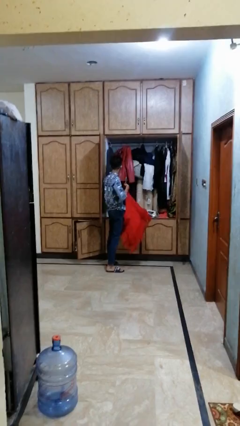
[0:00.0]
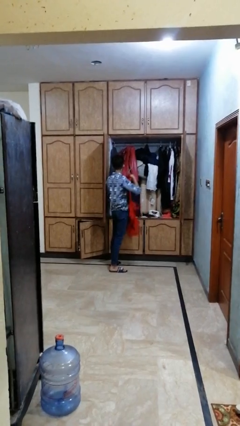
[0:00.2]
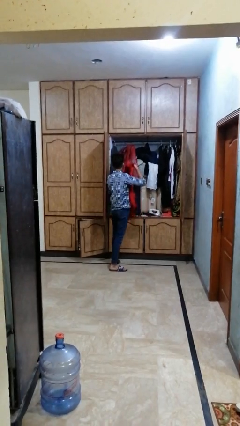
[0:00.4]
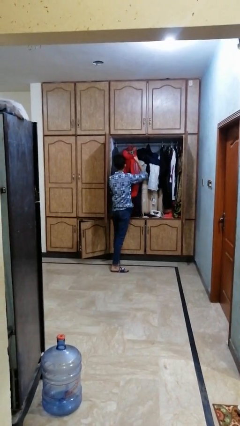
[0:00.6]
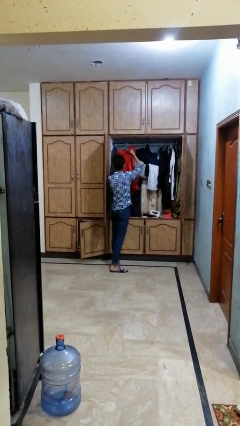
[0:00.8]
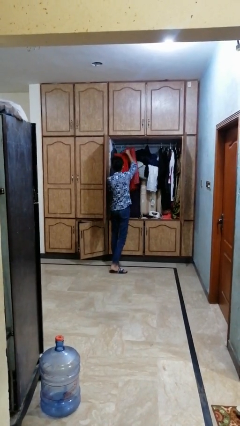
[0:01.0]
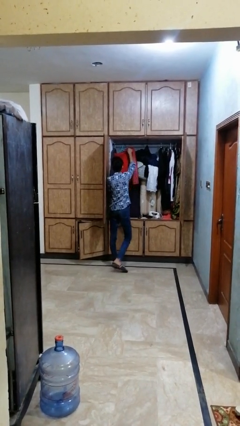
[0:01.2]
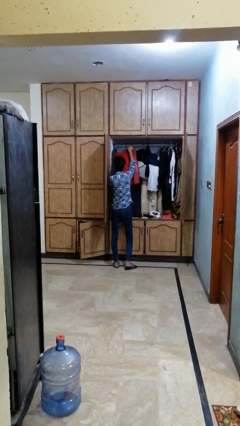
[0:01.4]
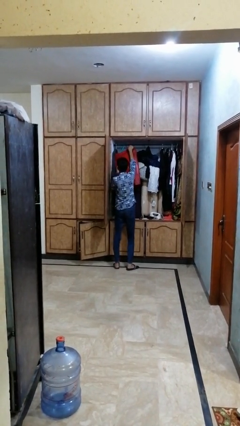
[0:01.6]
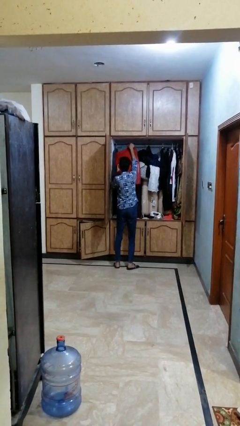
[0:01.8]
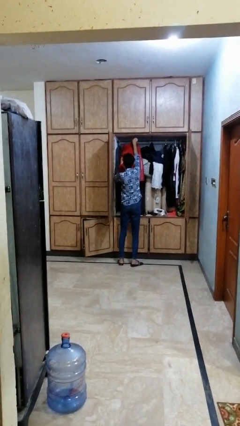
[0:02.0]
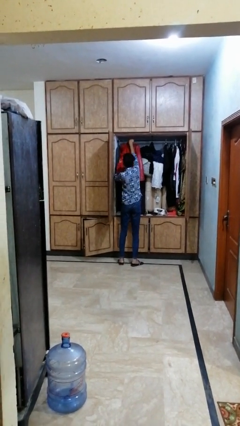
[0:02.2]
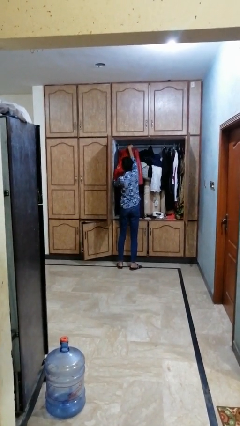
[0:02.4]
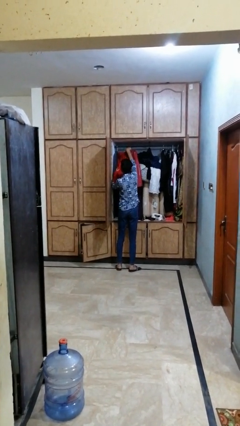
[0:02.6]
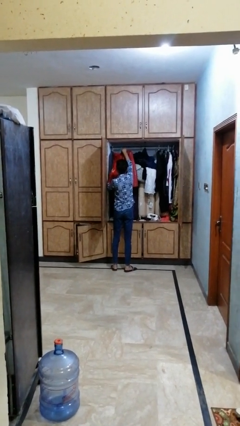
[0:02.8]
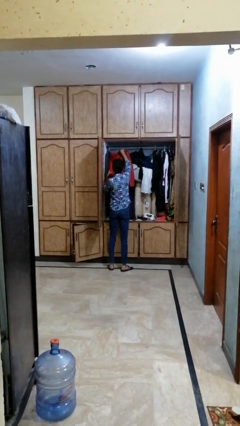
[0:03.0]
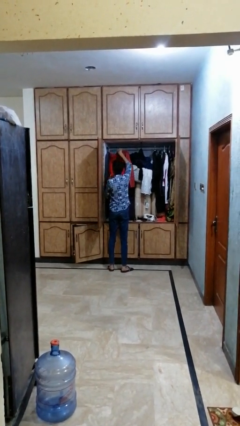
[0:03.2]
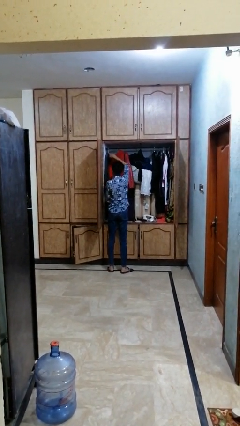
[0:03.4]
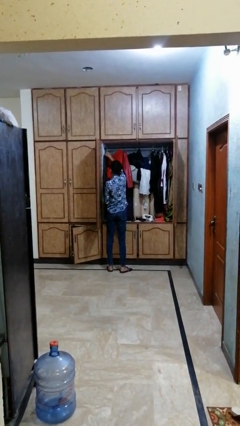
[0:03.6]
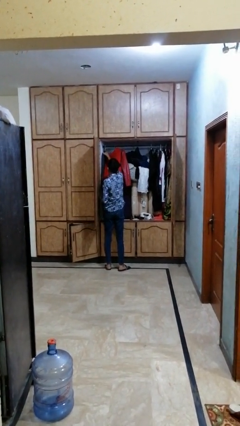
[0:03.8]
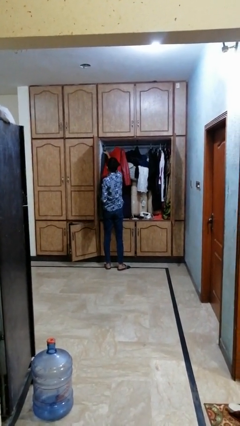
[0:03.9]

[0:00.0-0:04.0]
person puts clothes into dresser

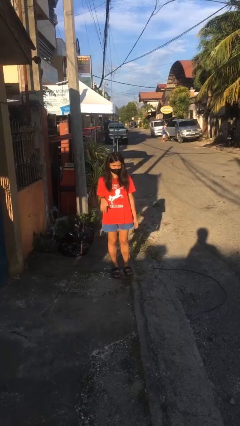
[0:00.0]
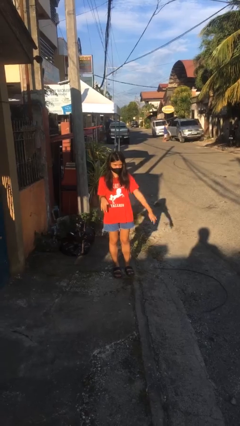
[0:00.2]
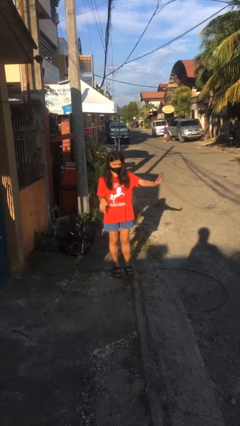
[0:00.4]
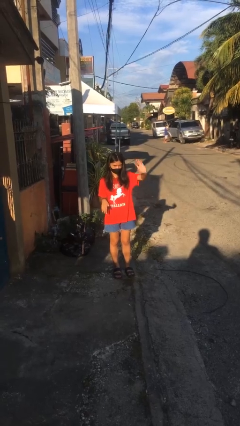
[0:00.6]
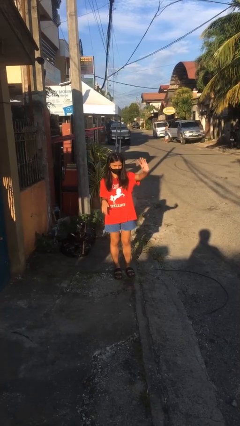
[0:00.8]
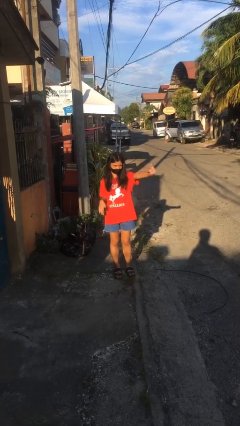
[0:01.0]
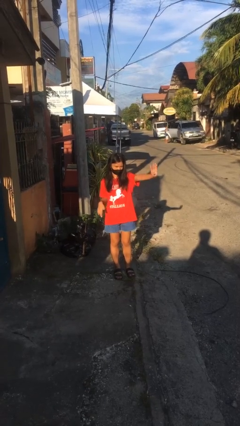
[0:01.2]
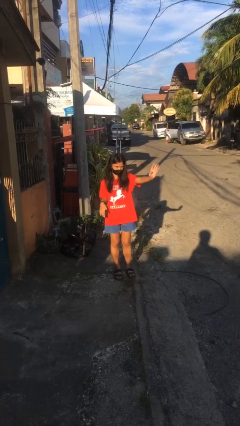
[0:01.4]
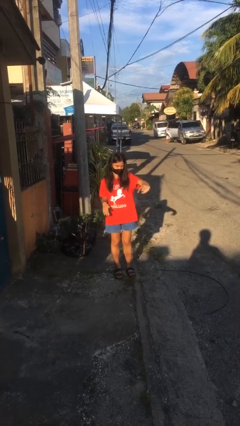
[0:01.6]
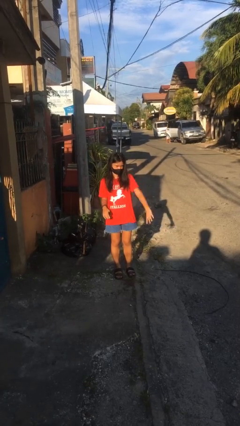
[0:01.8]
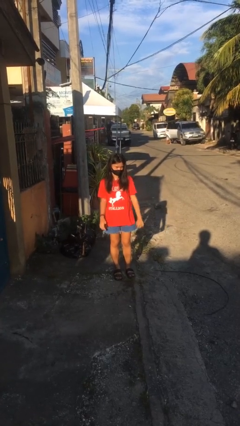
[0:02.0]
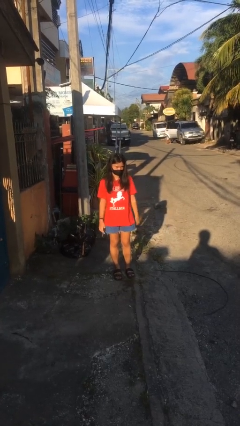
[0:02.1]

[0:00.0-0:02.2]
person waves at person

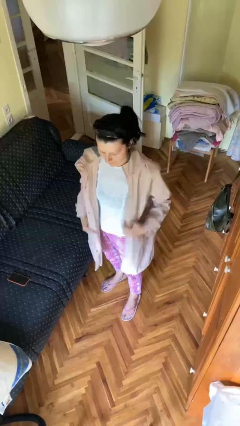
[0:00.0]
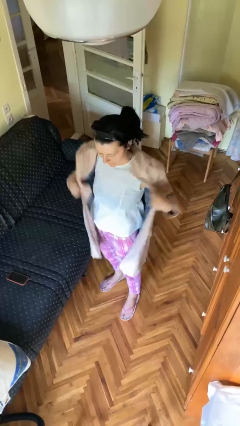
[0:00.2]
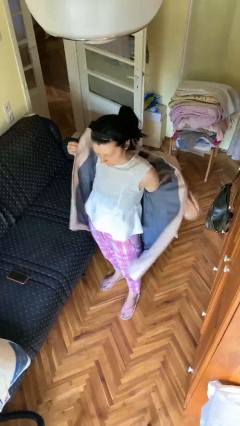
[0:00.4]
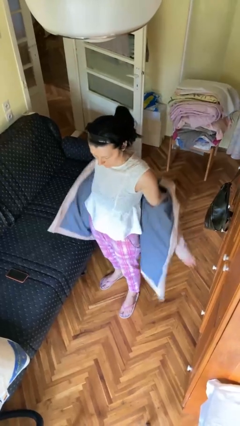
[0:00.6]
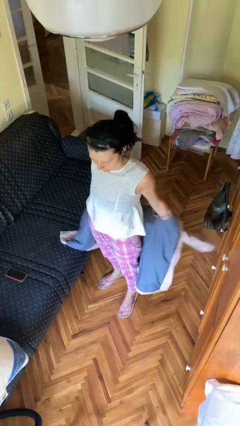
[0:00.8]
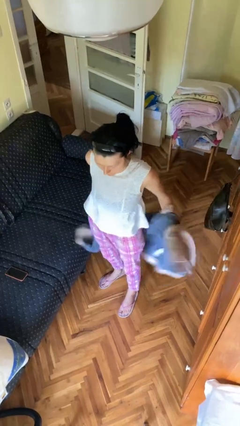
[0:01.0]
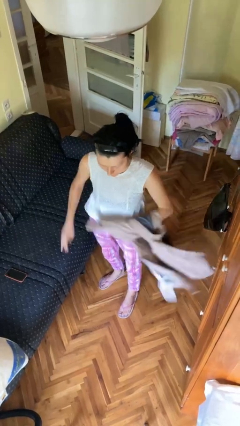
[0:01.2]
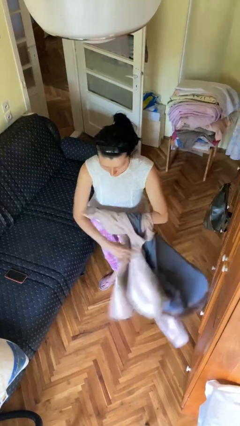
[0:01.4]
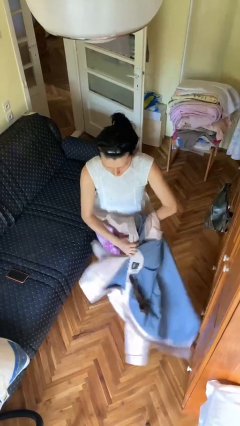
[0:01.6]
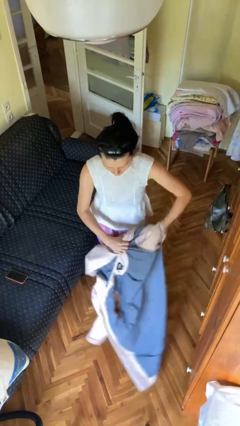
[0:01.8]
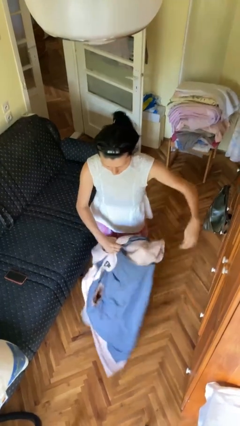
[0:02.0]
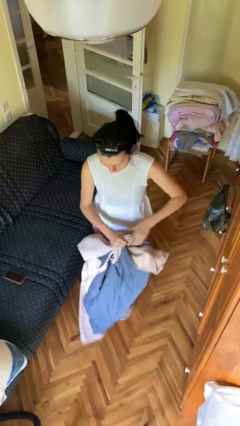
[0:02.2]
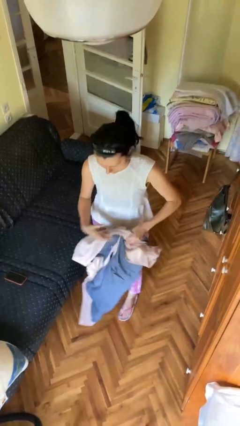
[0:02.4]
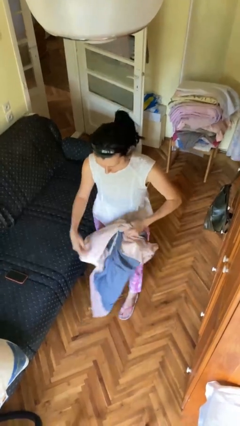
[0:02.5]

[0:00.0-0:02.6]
person takes off jacket

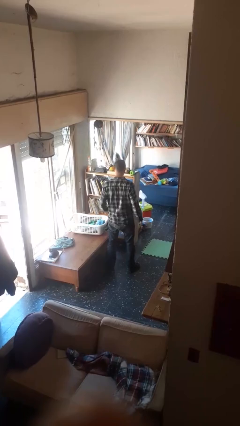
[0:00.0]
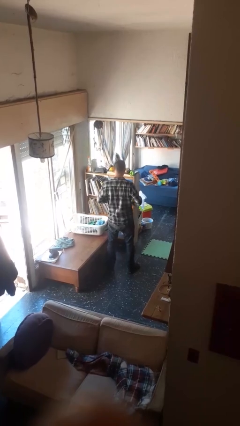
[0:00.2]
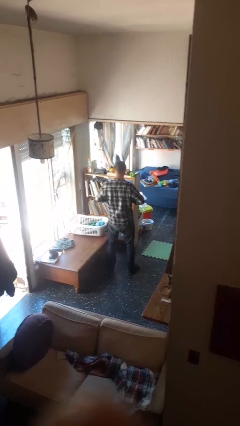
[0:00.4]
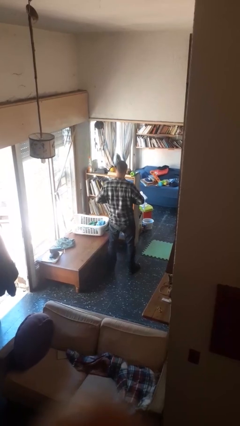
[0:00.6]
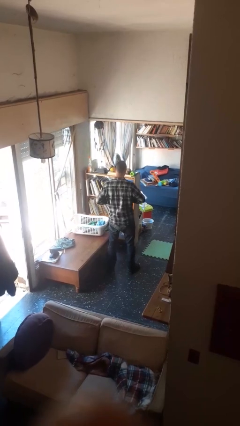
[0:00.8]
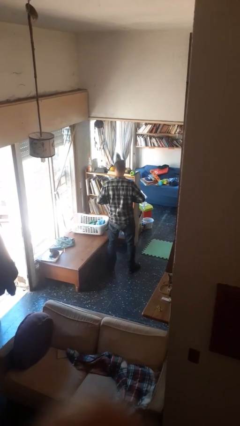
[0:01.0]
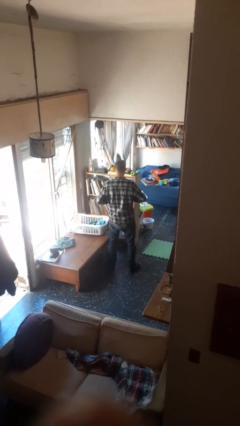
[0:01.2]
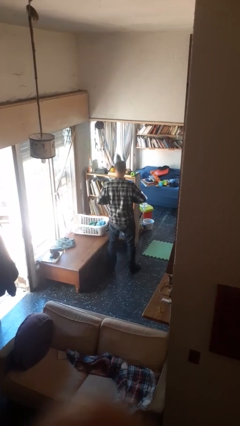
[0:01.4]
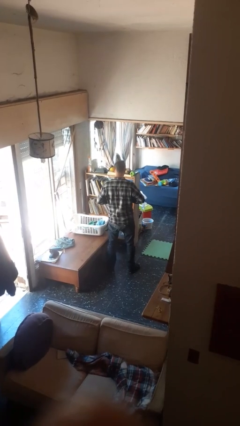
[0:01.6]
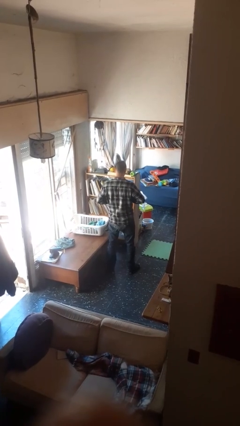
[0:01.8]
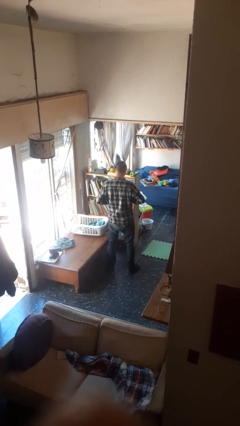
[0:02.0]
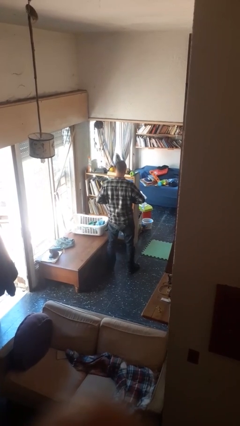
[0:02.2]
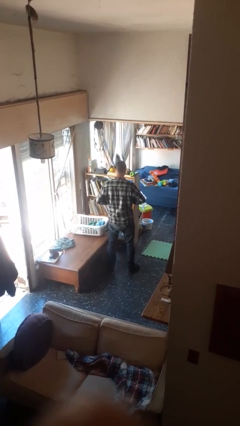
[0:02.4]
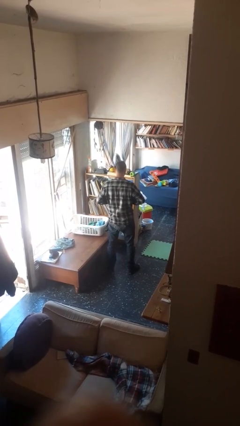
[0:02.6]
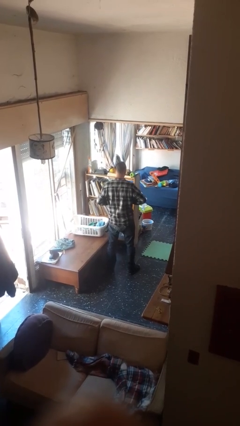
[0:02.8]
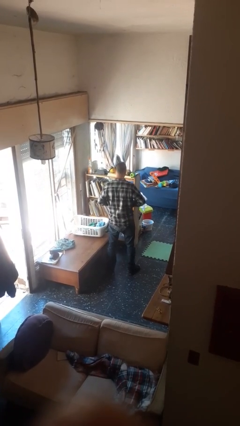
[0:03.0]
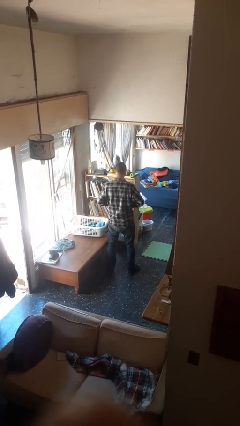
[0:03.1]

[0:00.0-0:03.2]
person buttons shirt

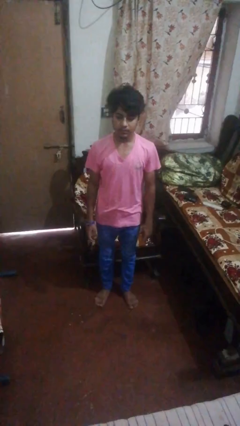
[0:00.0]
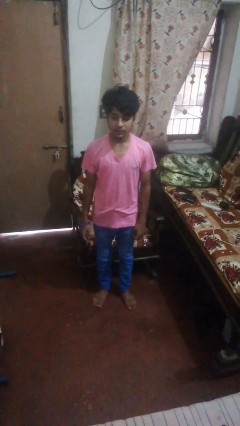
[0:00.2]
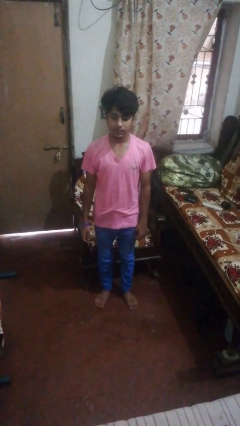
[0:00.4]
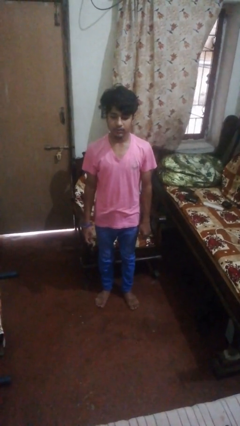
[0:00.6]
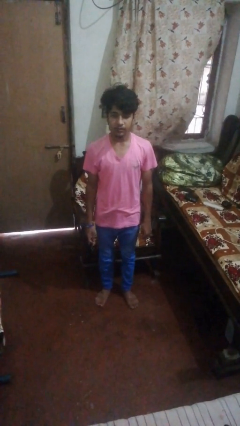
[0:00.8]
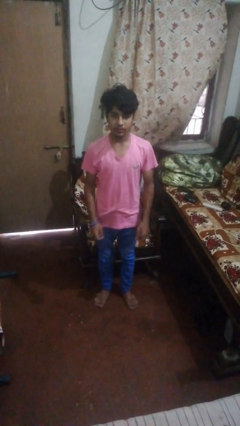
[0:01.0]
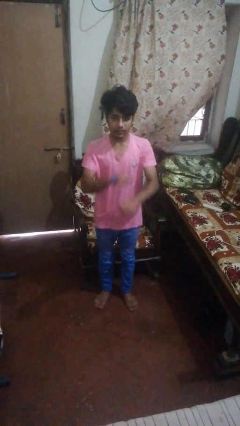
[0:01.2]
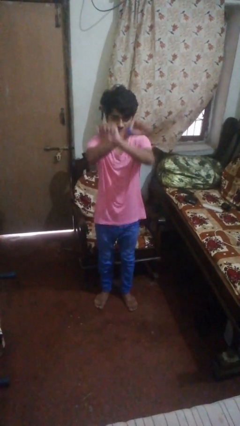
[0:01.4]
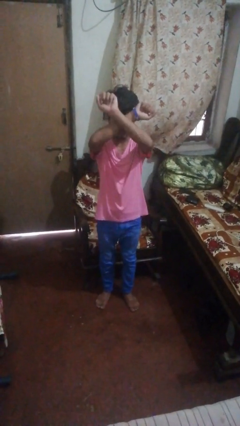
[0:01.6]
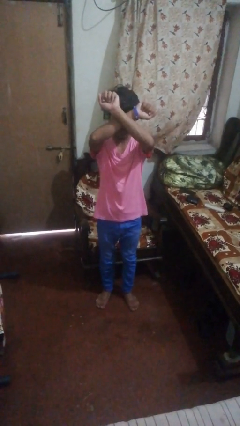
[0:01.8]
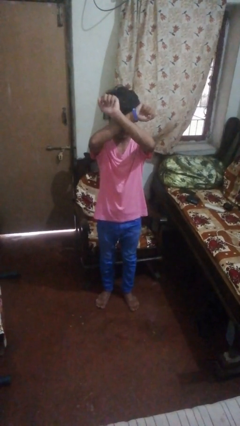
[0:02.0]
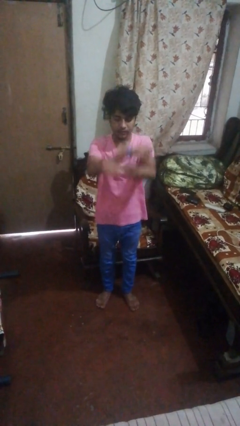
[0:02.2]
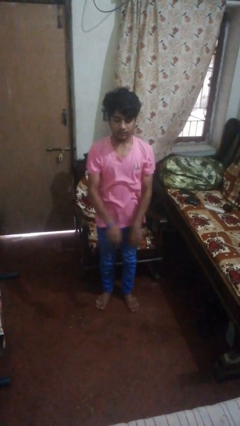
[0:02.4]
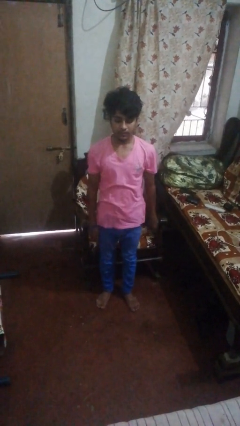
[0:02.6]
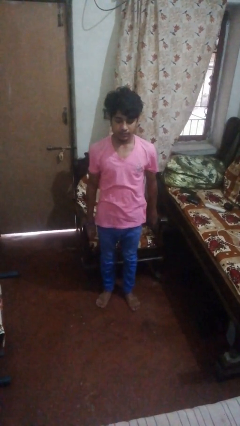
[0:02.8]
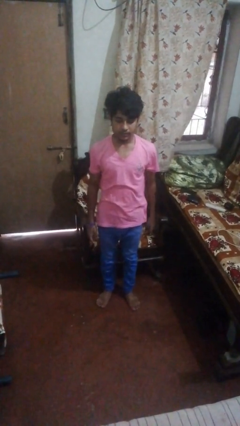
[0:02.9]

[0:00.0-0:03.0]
person karate chop

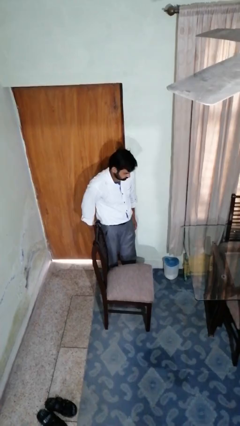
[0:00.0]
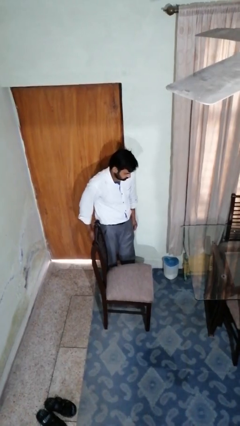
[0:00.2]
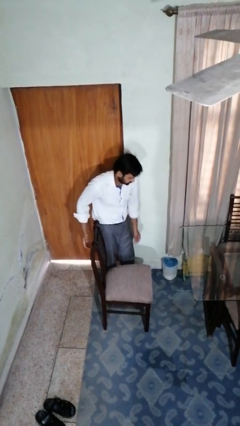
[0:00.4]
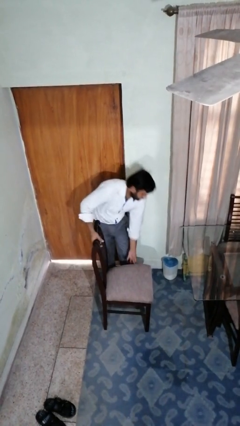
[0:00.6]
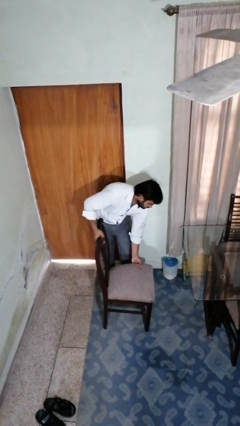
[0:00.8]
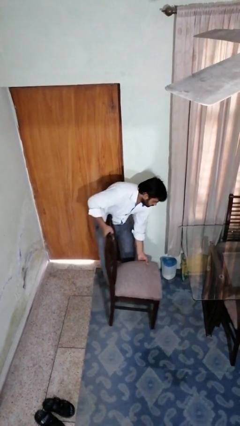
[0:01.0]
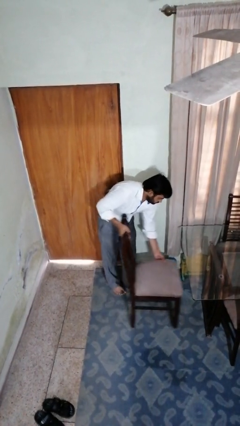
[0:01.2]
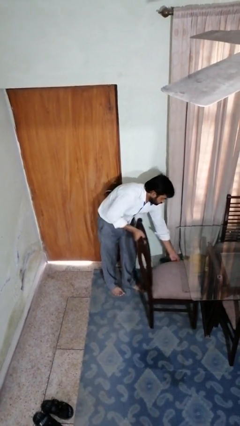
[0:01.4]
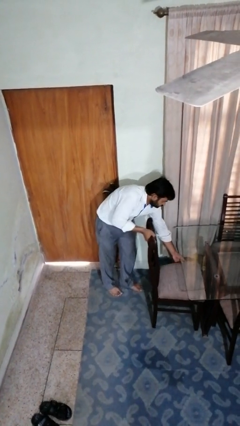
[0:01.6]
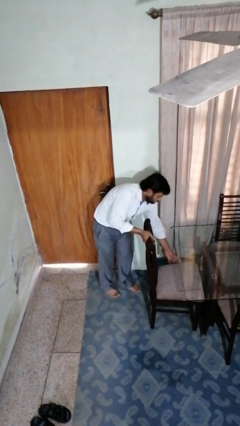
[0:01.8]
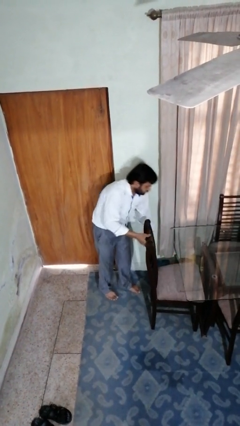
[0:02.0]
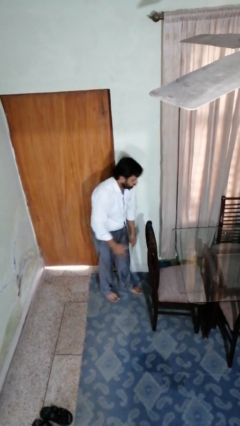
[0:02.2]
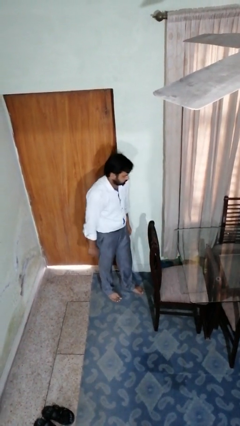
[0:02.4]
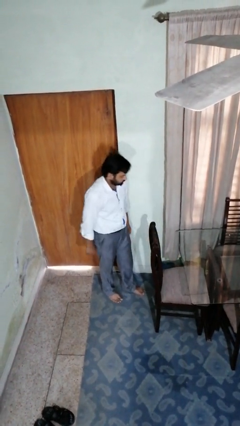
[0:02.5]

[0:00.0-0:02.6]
person pushes in chair
